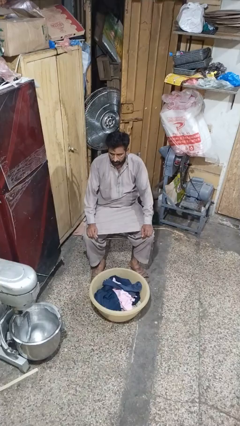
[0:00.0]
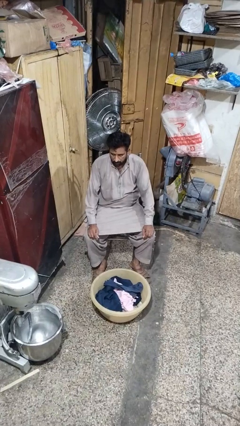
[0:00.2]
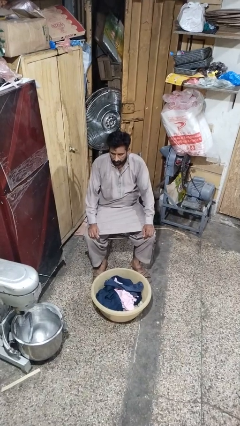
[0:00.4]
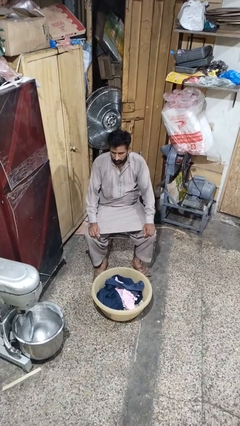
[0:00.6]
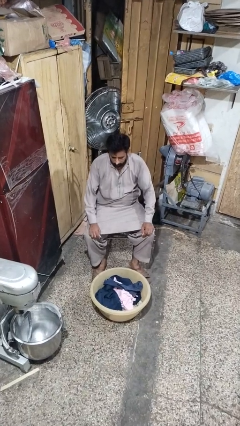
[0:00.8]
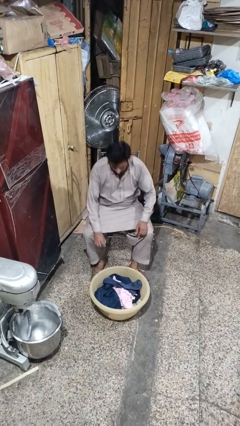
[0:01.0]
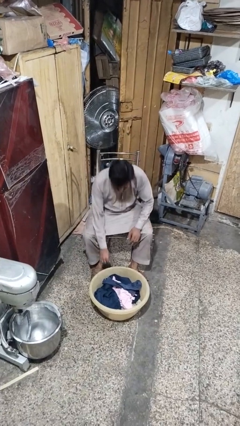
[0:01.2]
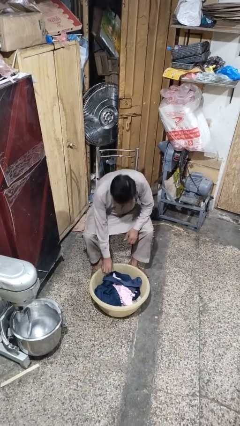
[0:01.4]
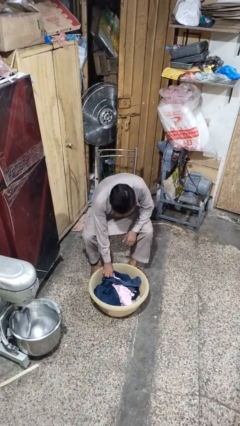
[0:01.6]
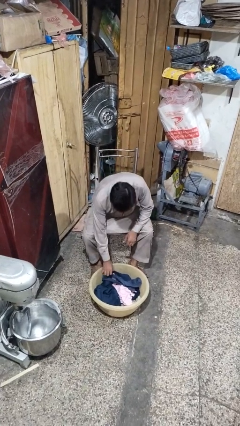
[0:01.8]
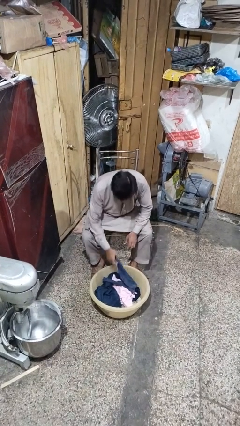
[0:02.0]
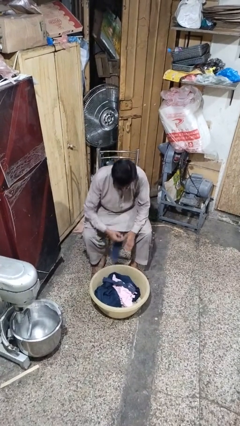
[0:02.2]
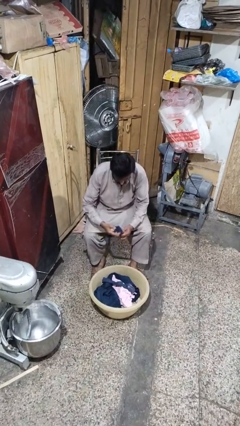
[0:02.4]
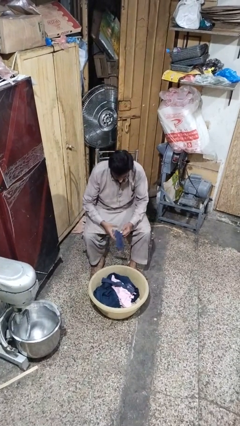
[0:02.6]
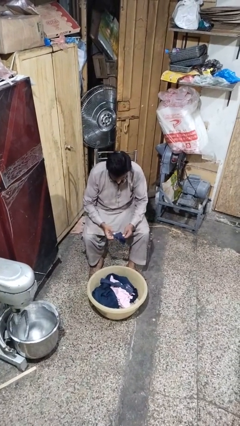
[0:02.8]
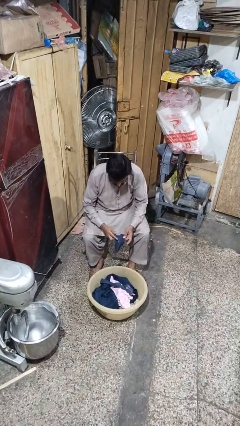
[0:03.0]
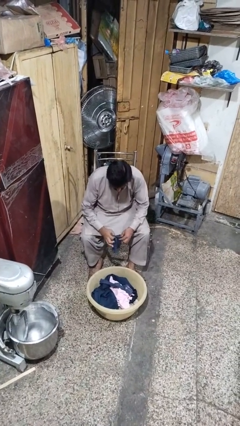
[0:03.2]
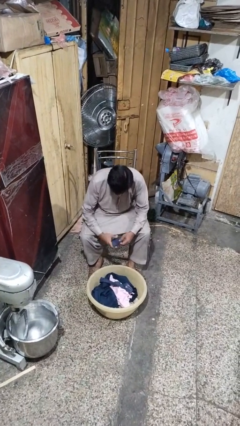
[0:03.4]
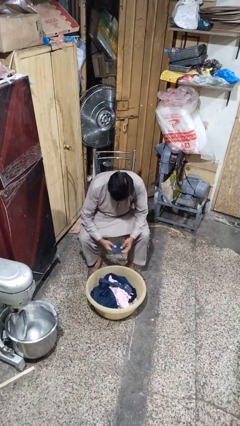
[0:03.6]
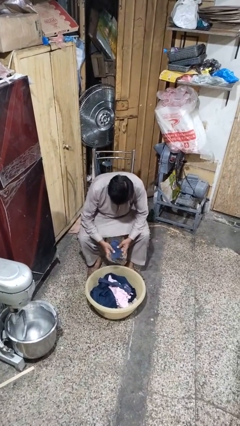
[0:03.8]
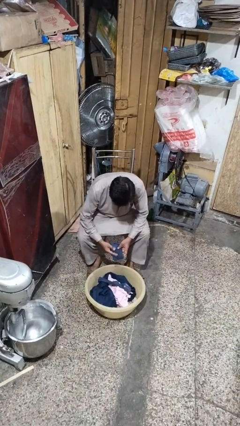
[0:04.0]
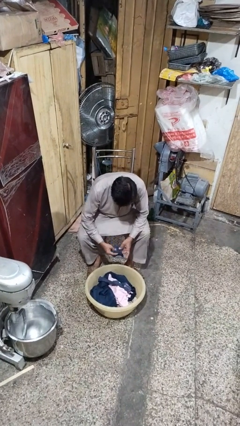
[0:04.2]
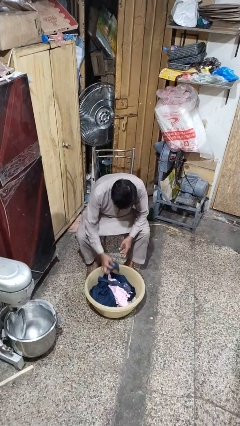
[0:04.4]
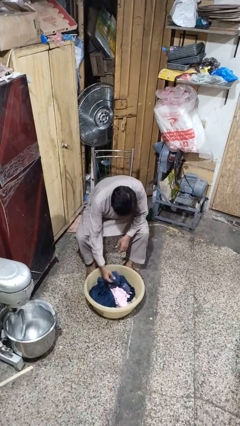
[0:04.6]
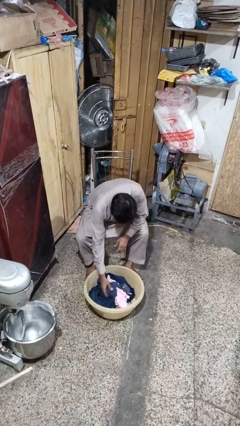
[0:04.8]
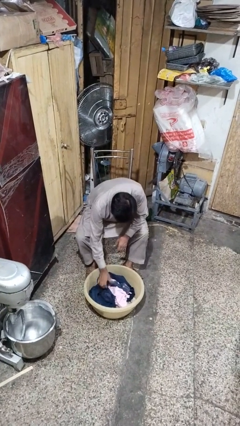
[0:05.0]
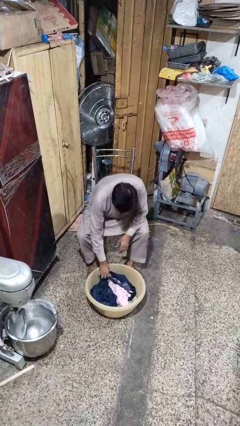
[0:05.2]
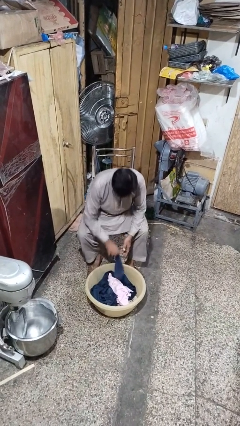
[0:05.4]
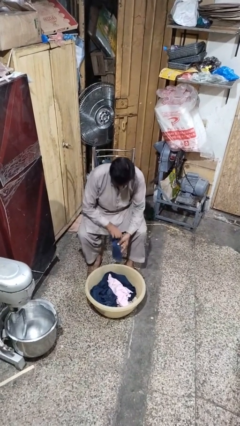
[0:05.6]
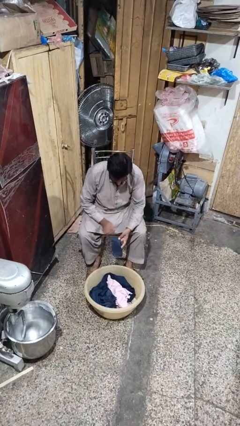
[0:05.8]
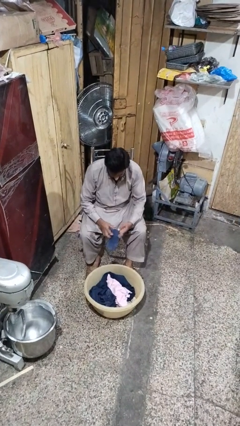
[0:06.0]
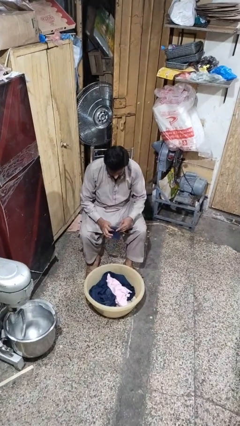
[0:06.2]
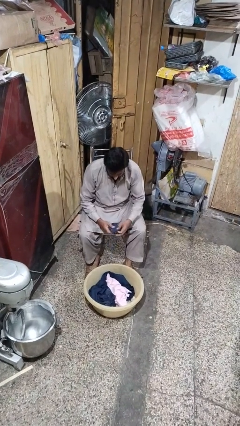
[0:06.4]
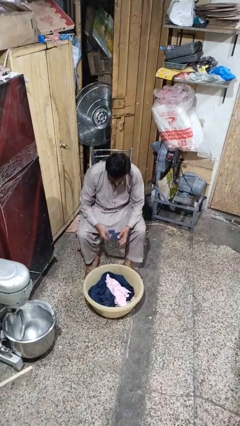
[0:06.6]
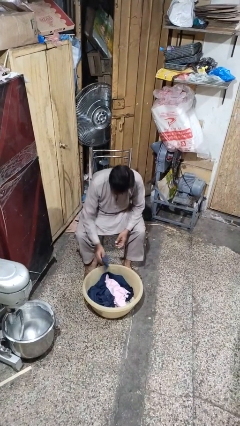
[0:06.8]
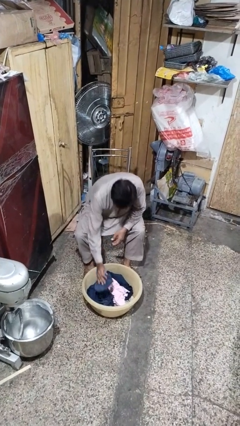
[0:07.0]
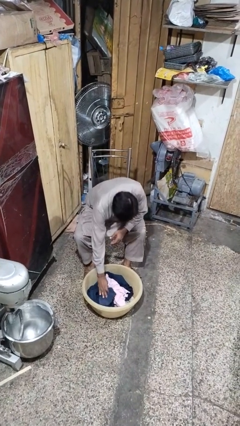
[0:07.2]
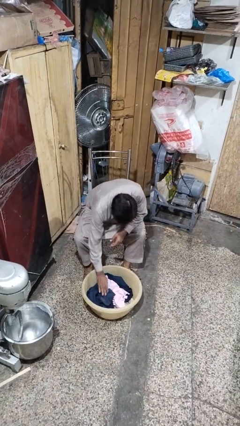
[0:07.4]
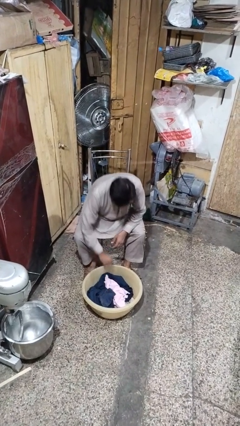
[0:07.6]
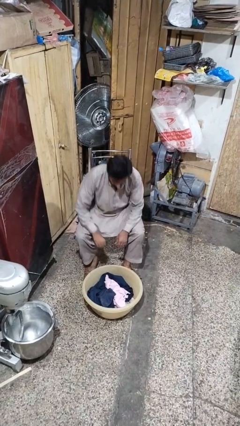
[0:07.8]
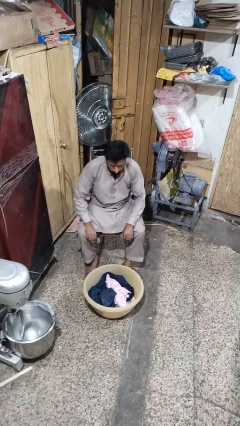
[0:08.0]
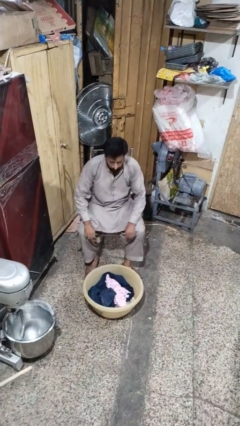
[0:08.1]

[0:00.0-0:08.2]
person folds socks

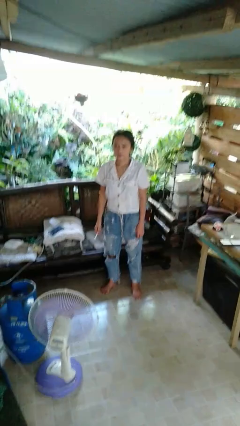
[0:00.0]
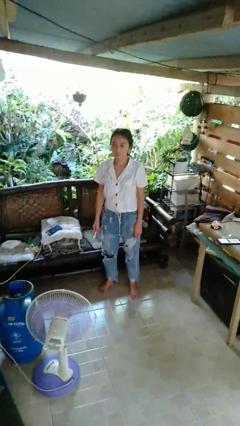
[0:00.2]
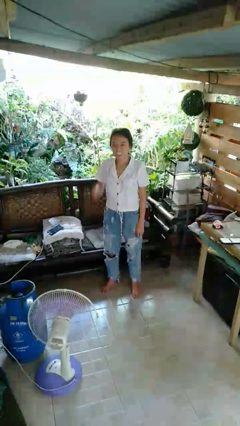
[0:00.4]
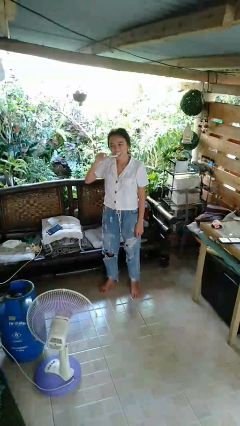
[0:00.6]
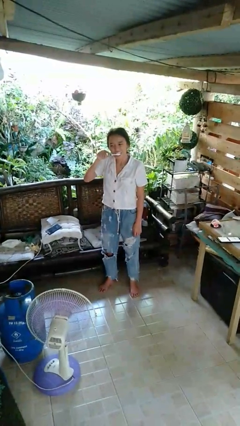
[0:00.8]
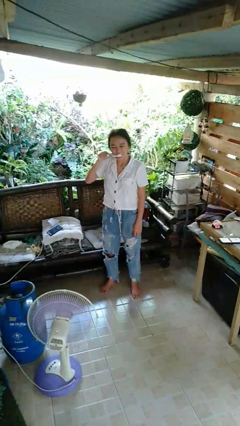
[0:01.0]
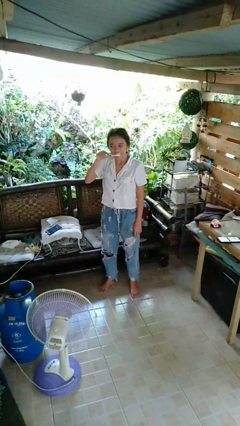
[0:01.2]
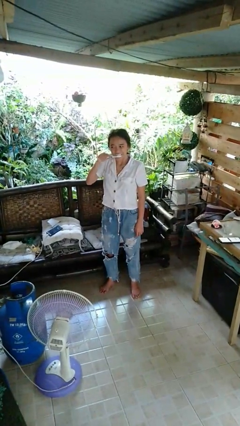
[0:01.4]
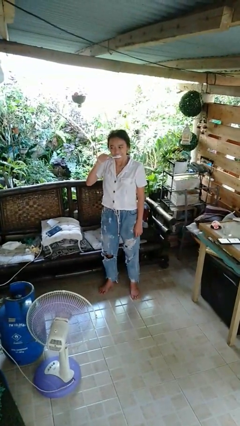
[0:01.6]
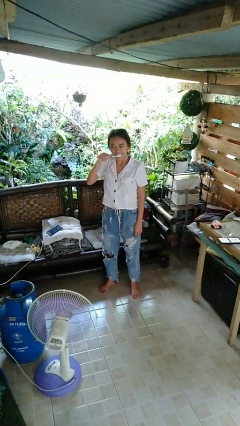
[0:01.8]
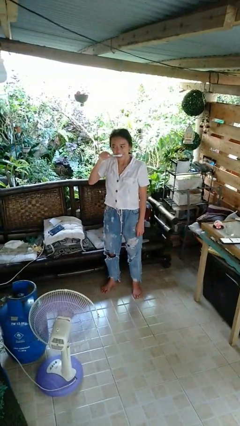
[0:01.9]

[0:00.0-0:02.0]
person brushes teeth

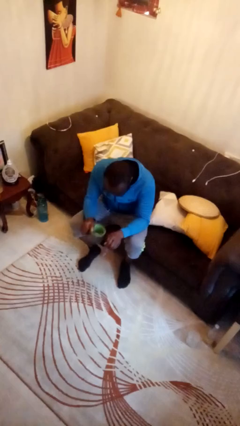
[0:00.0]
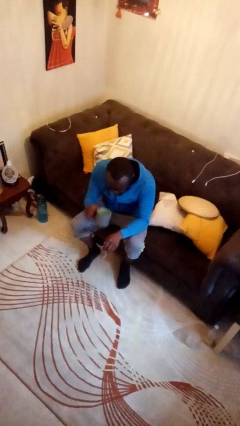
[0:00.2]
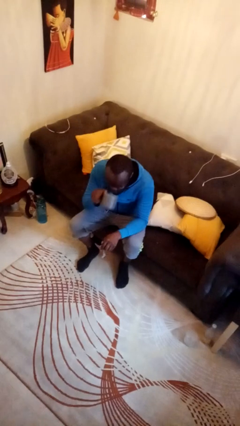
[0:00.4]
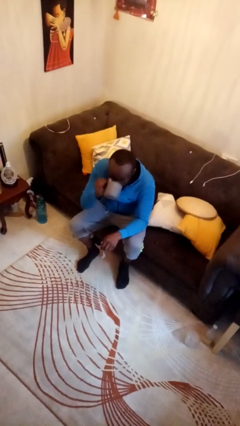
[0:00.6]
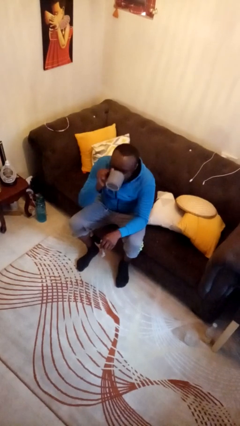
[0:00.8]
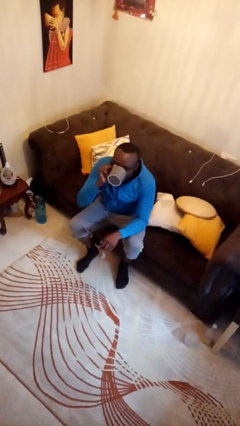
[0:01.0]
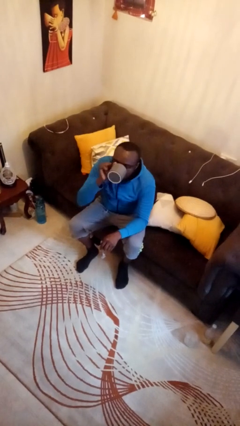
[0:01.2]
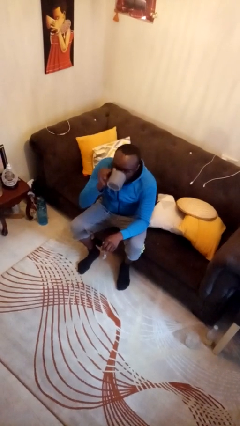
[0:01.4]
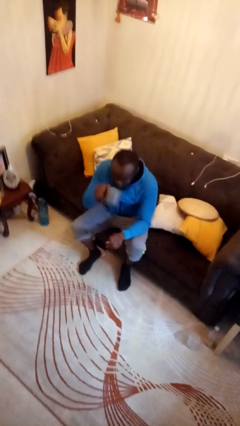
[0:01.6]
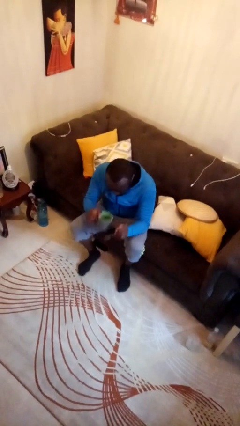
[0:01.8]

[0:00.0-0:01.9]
person drinks from mug

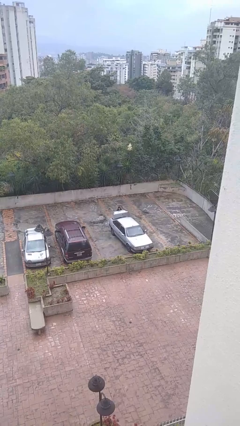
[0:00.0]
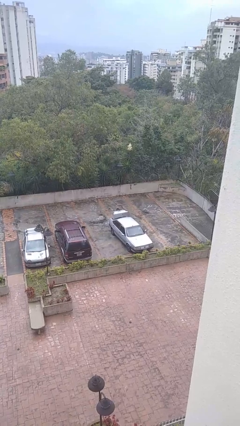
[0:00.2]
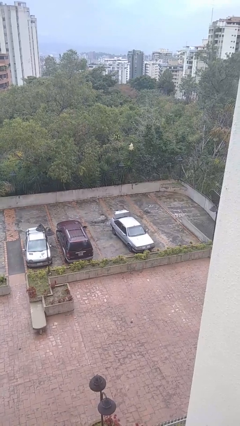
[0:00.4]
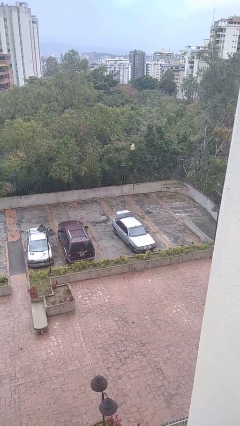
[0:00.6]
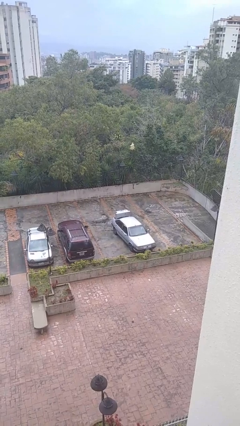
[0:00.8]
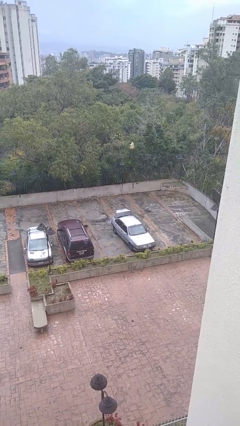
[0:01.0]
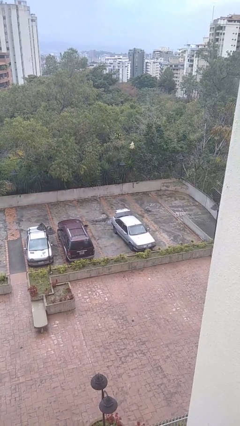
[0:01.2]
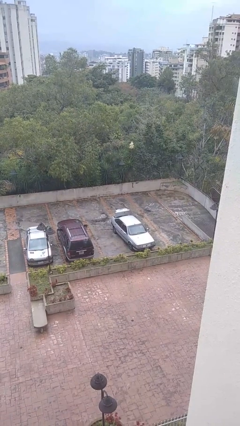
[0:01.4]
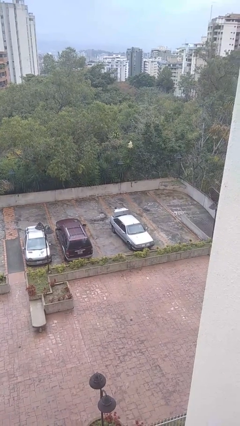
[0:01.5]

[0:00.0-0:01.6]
person loads car

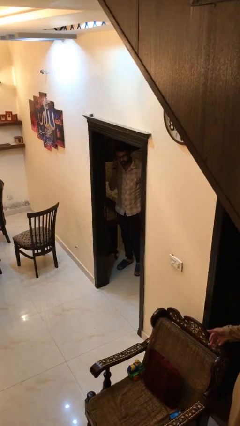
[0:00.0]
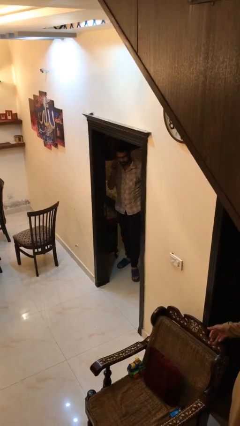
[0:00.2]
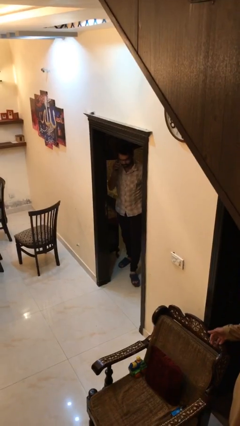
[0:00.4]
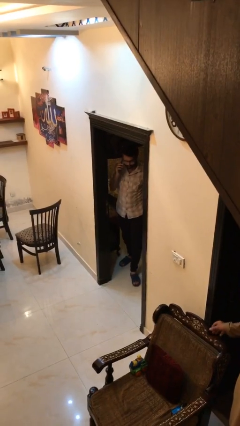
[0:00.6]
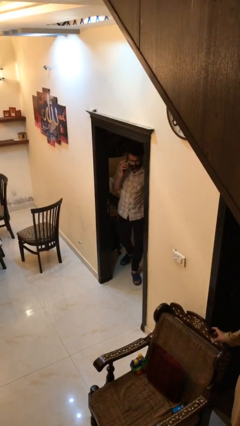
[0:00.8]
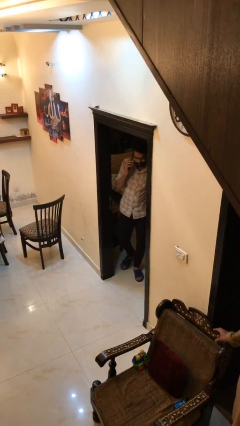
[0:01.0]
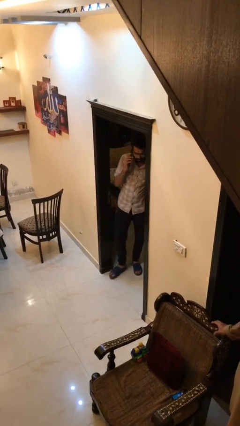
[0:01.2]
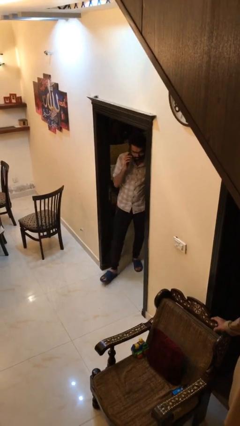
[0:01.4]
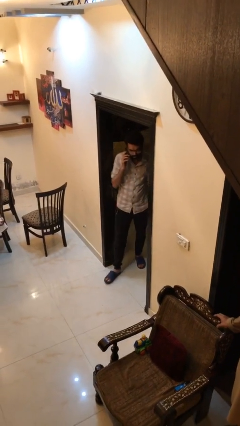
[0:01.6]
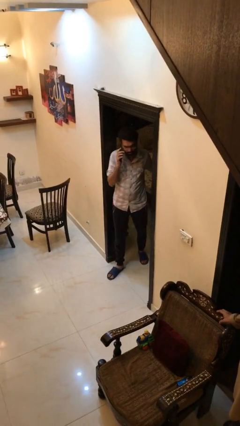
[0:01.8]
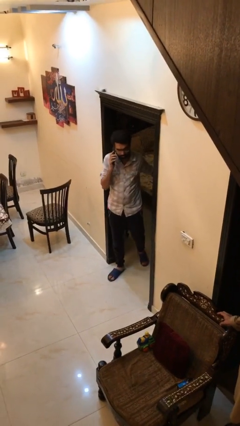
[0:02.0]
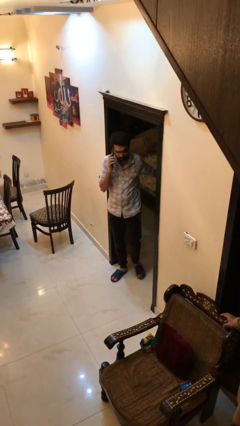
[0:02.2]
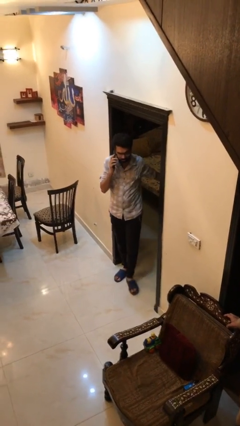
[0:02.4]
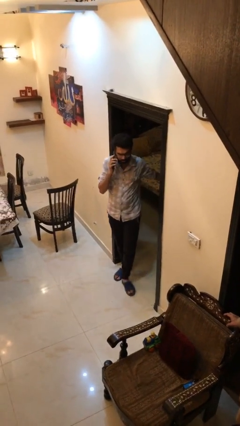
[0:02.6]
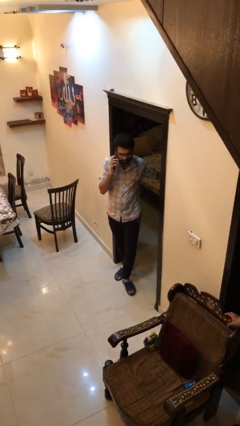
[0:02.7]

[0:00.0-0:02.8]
person enters scene through structure

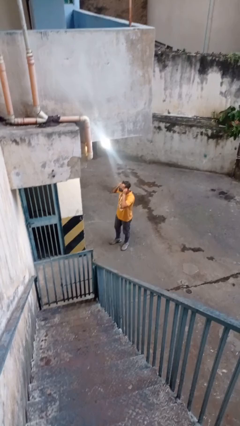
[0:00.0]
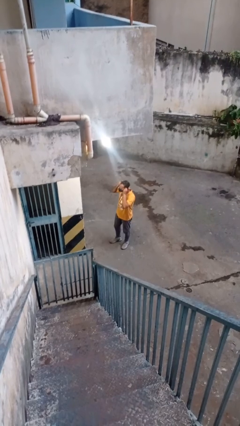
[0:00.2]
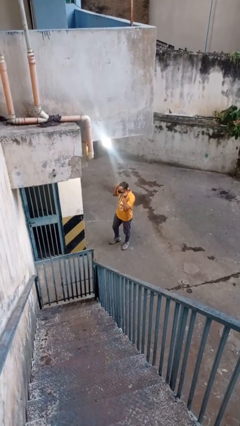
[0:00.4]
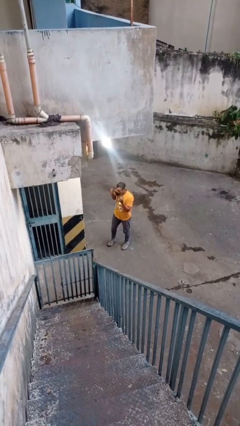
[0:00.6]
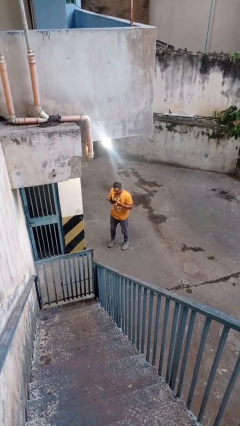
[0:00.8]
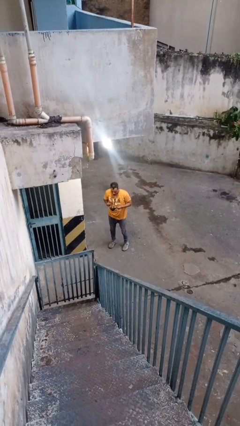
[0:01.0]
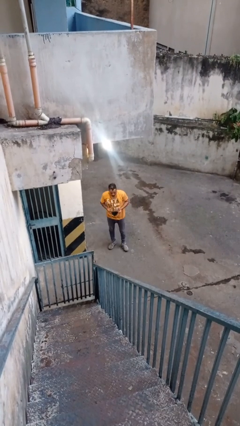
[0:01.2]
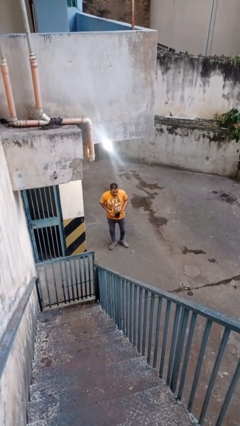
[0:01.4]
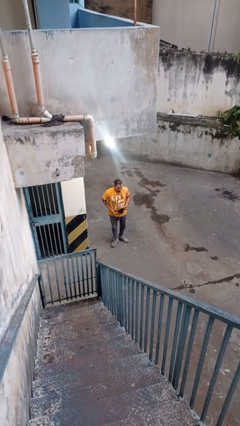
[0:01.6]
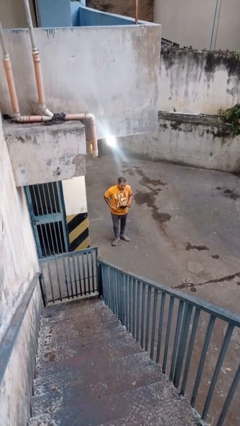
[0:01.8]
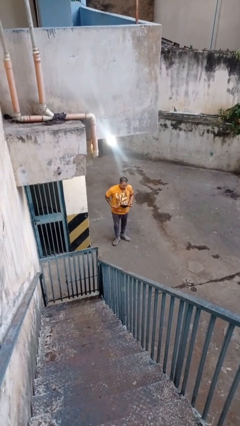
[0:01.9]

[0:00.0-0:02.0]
person takes off facemask
